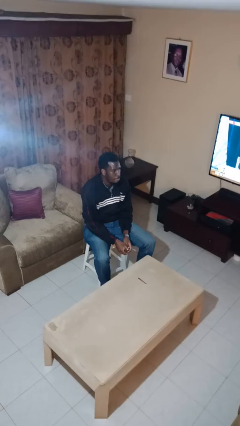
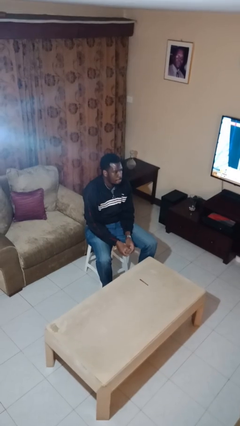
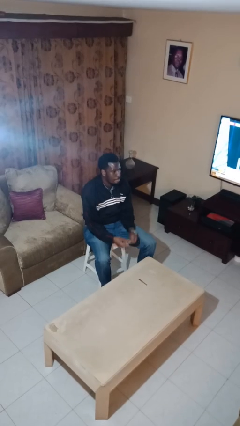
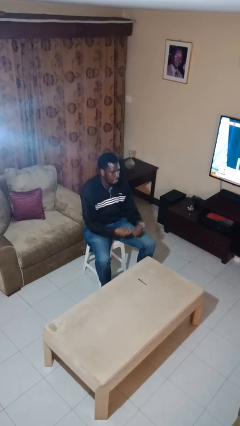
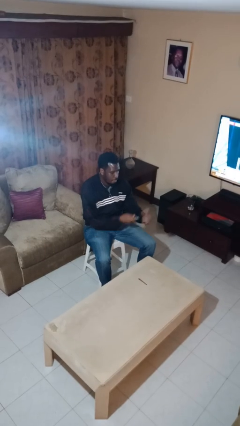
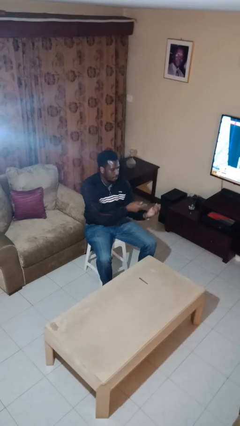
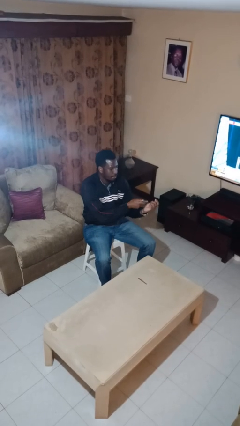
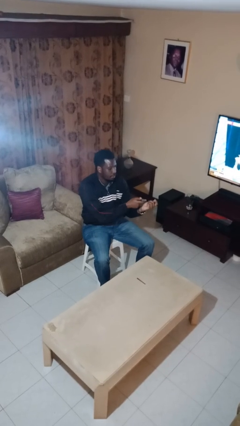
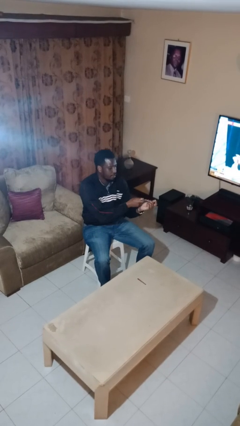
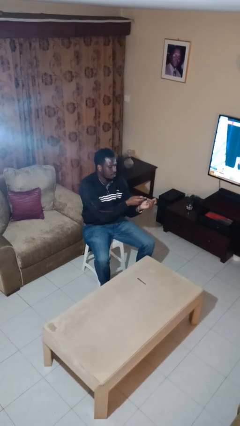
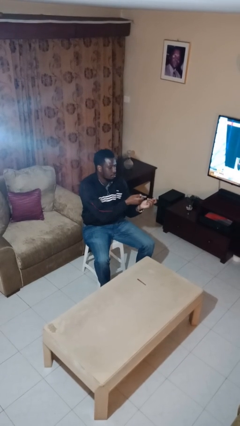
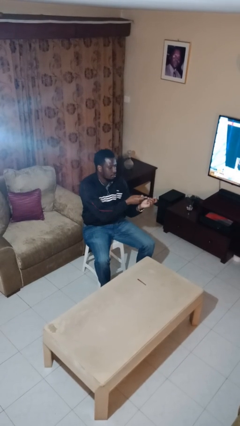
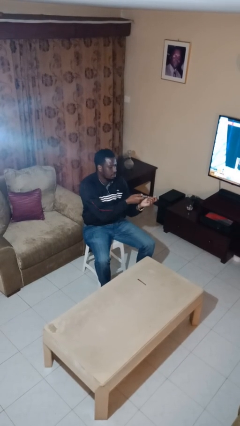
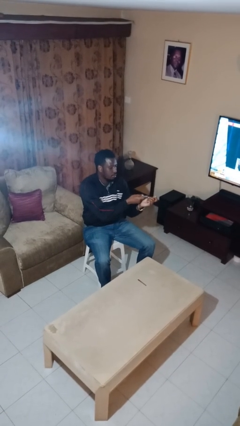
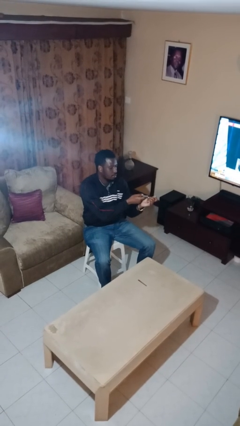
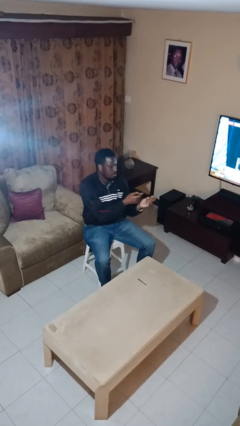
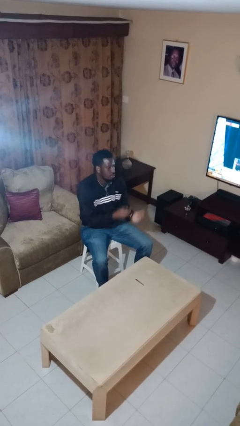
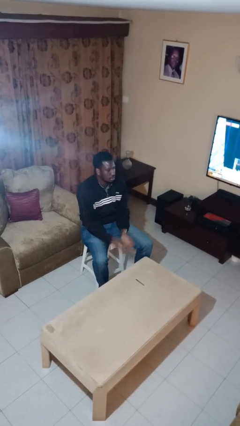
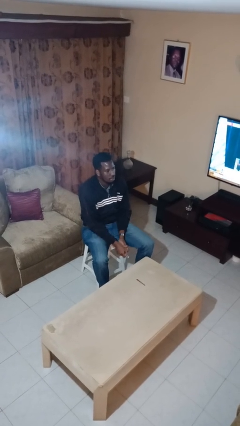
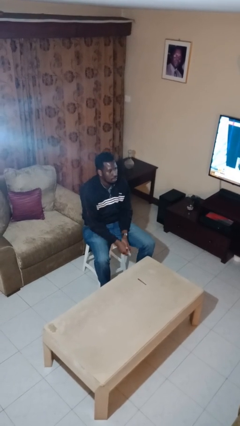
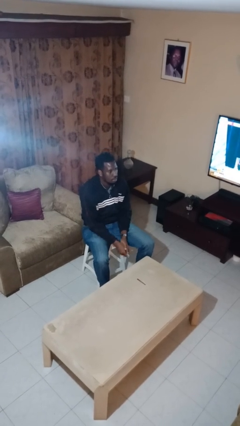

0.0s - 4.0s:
person clips fingernails

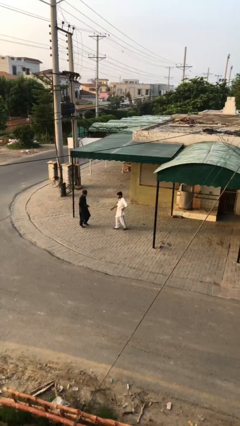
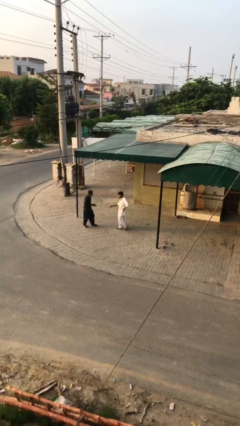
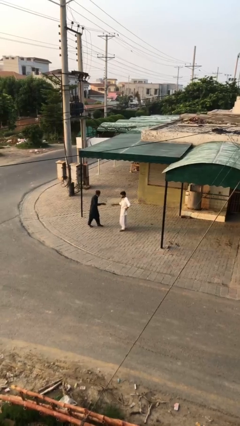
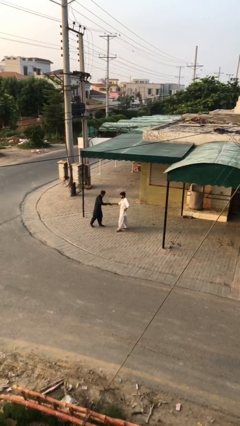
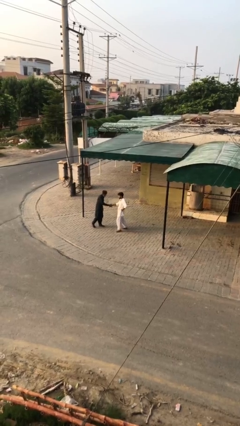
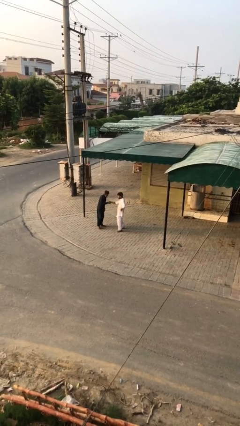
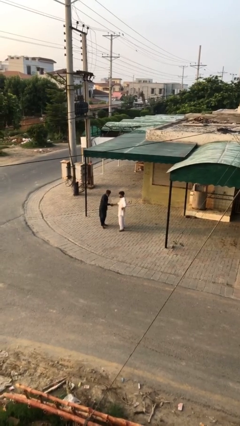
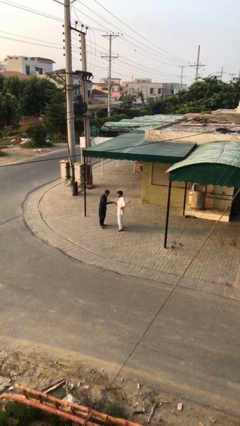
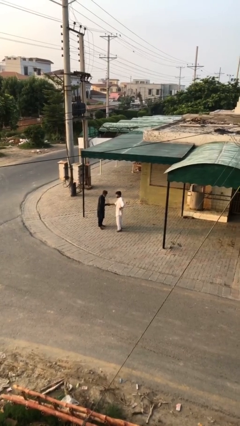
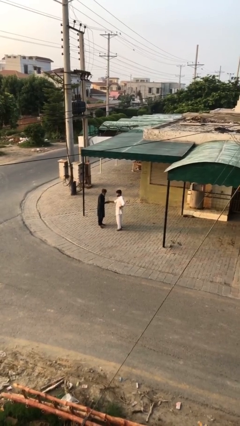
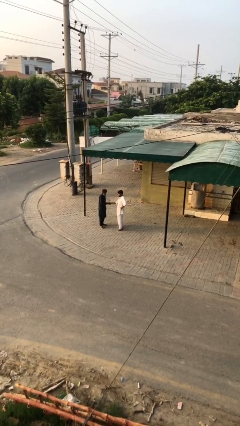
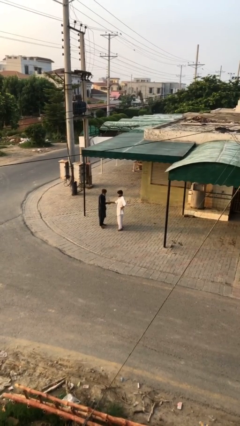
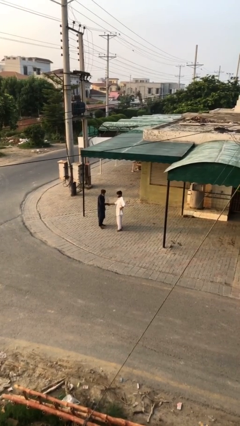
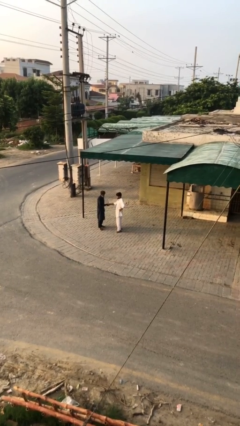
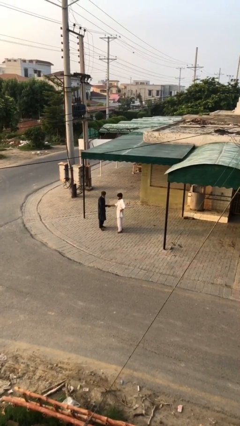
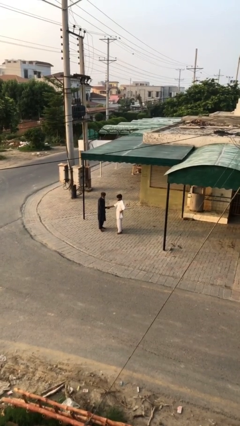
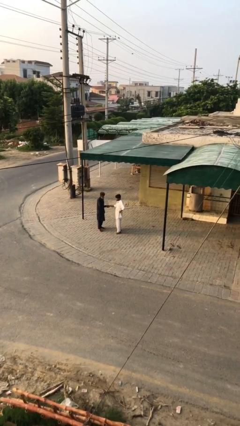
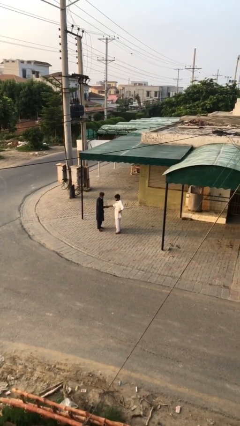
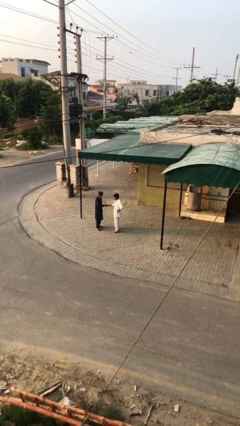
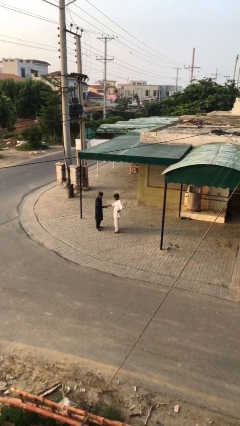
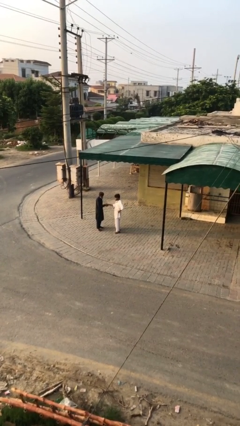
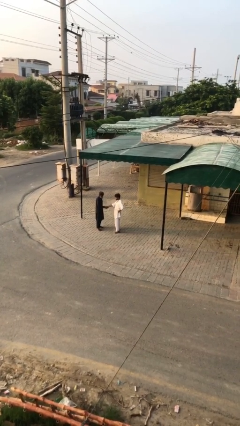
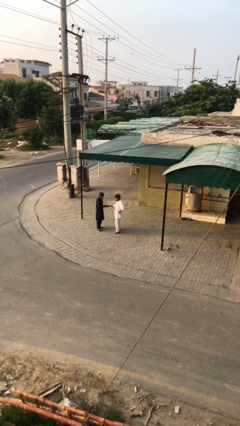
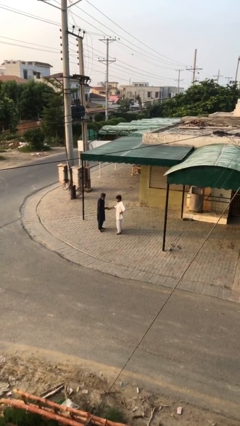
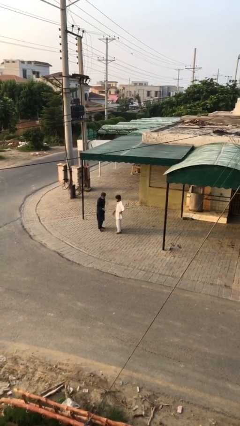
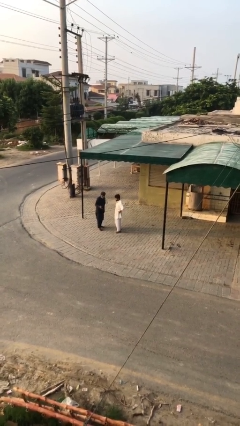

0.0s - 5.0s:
person shakes hand

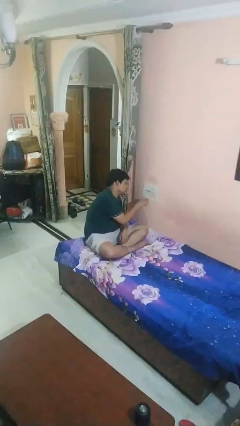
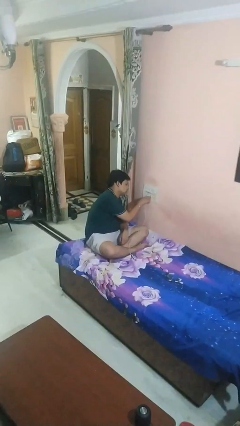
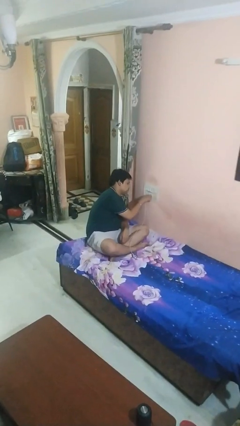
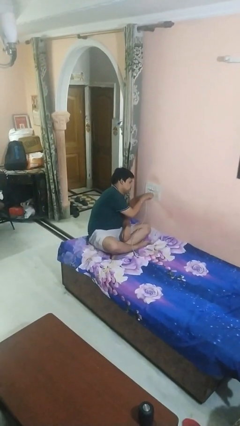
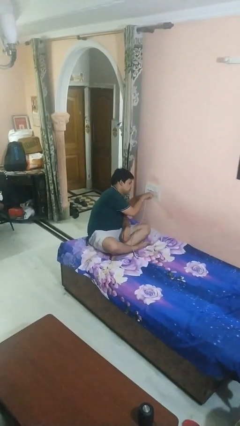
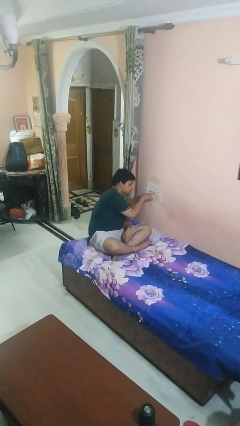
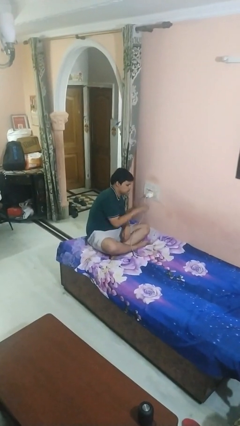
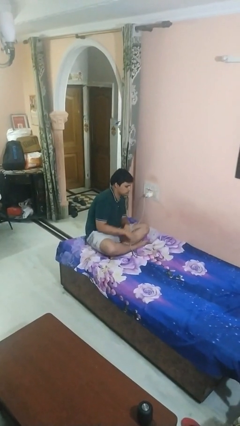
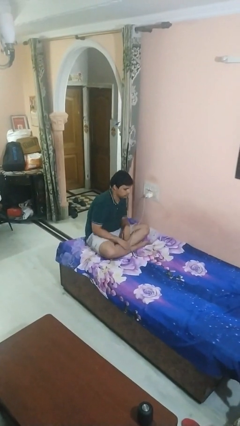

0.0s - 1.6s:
person plugs into electrical socket

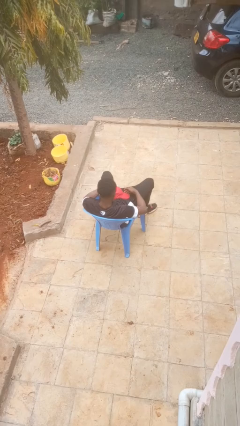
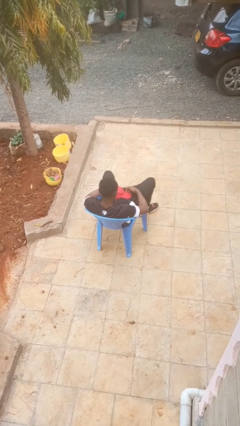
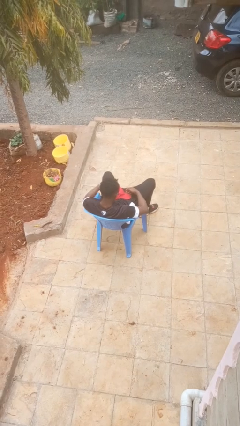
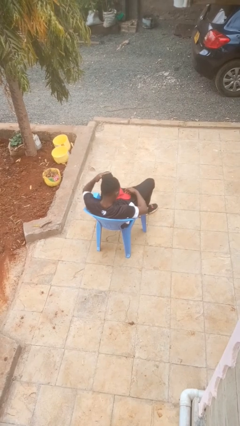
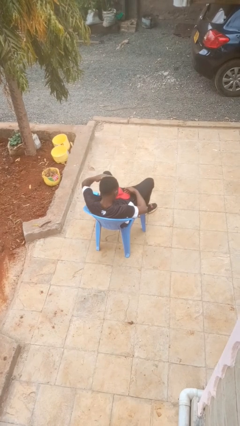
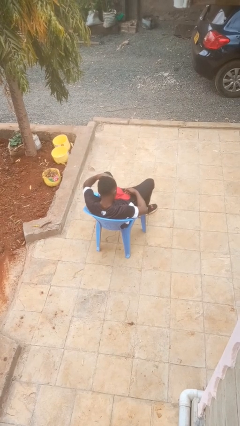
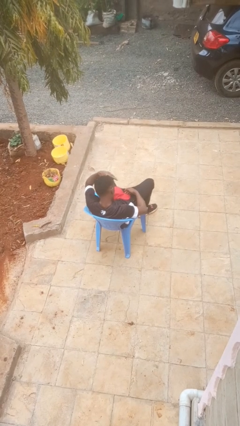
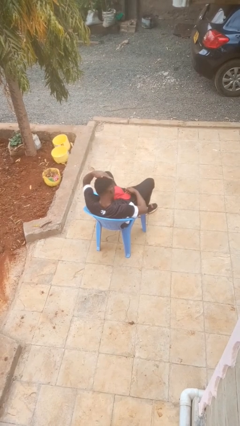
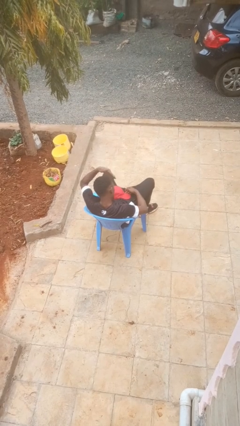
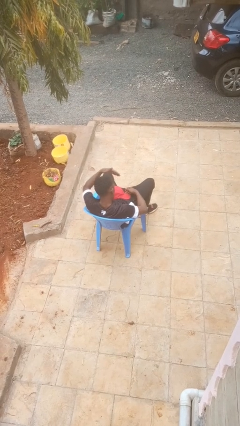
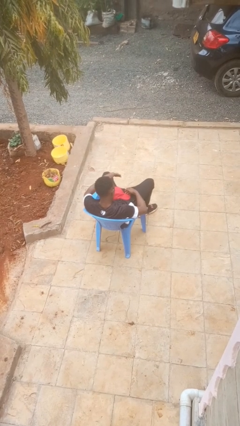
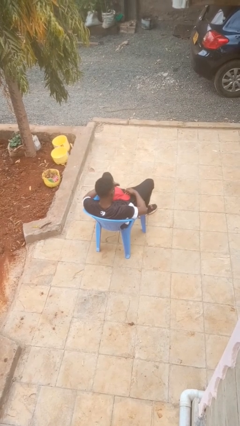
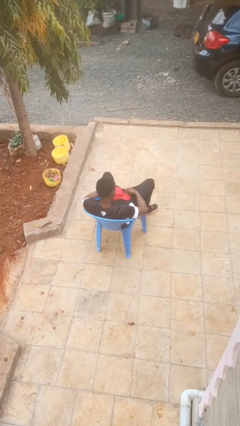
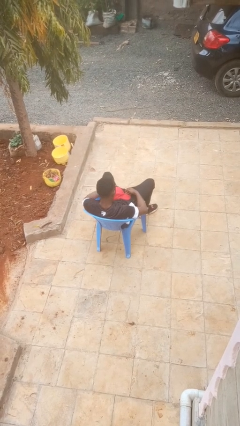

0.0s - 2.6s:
person strokes hair

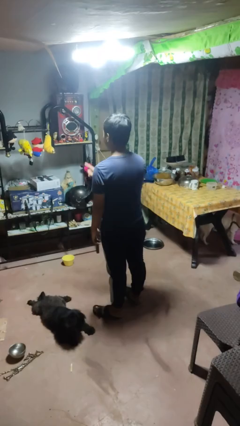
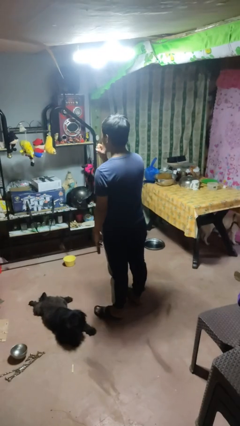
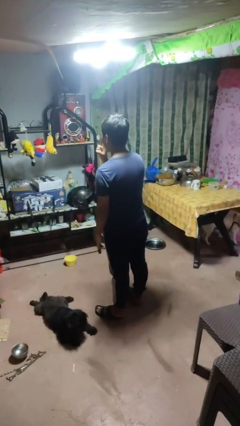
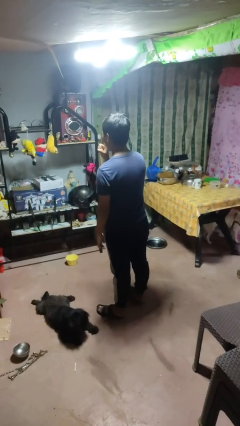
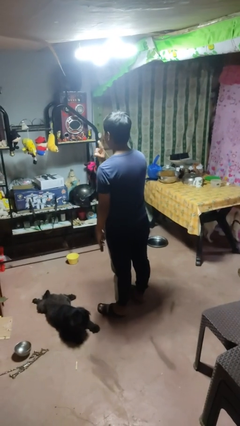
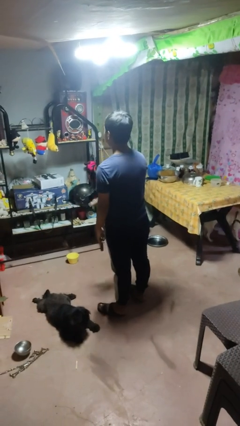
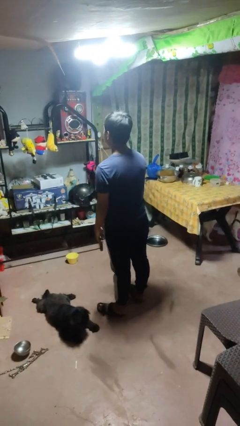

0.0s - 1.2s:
person gestures be quiet

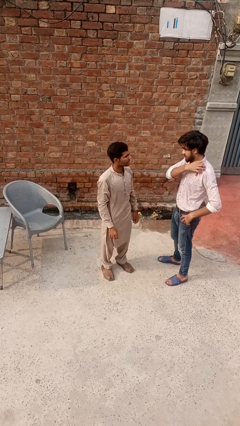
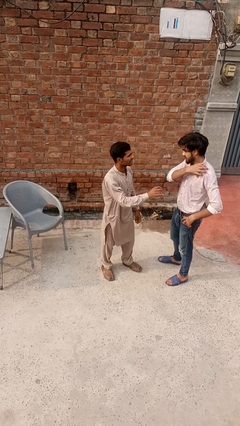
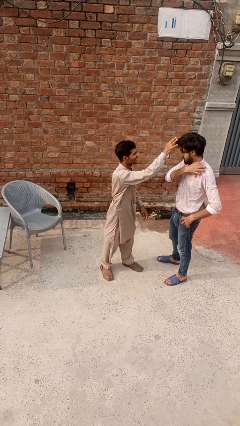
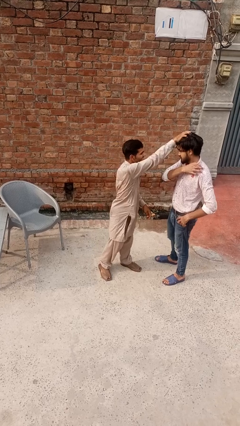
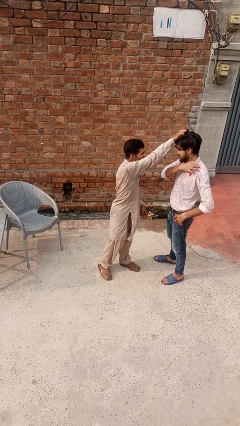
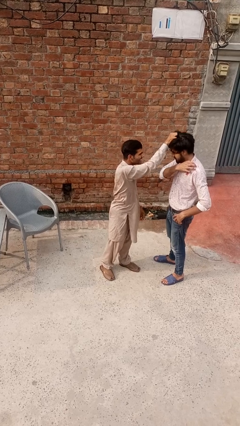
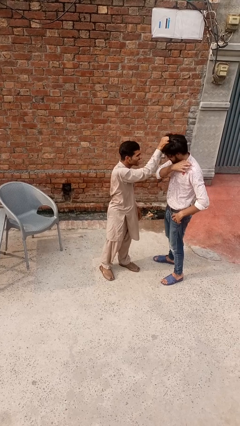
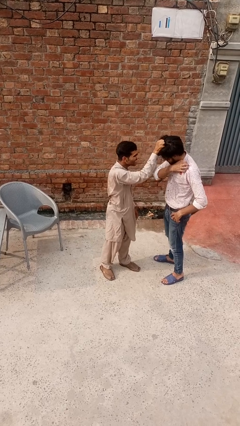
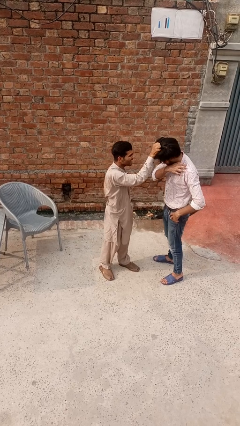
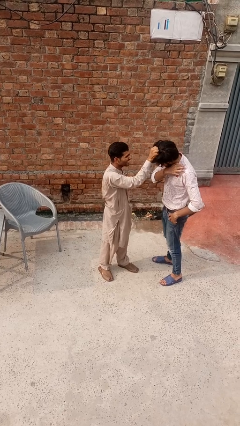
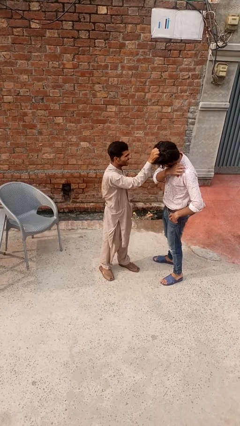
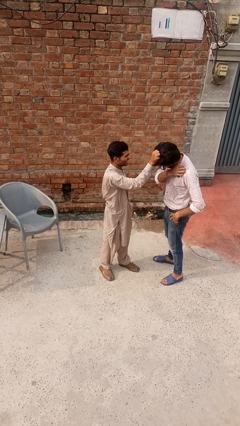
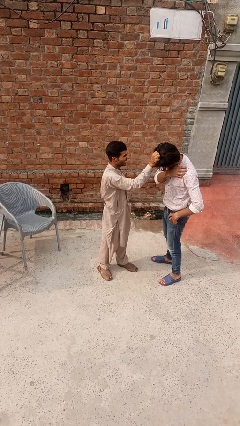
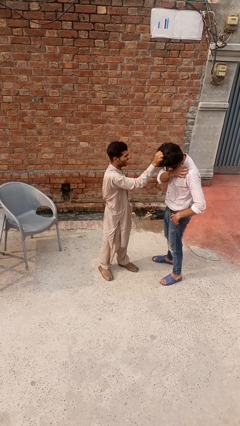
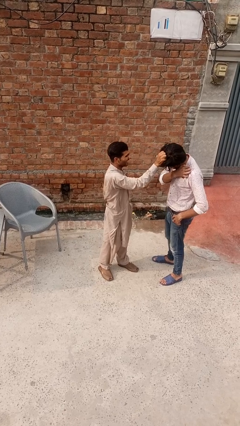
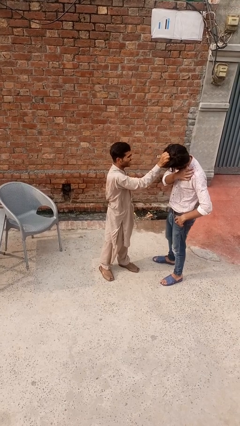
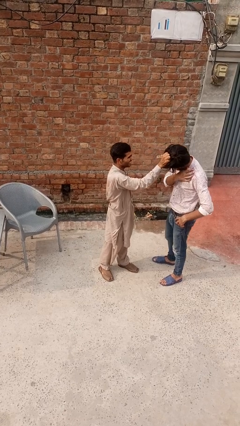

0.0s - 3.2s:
person grabs person by hair
